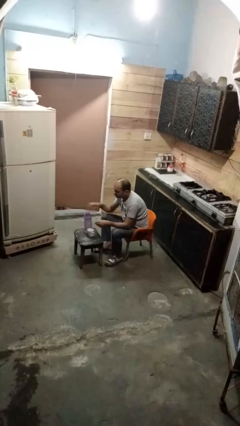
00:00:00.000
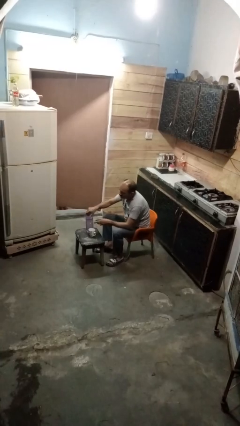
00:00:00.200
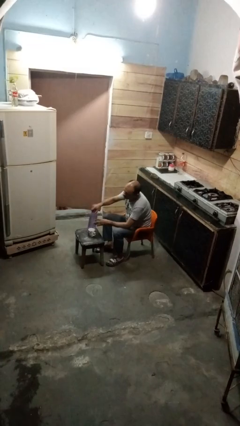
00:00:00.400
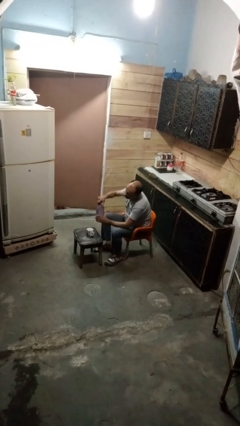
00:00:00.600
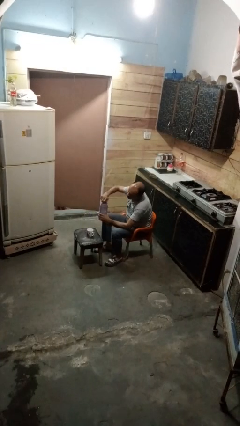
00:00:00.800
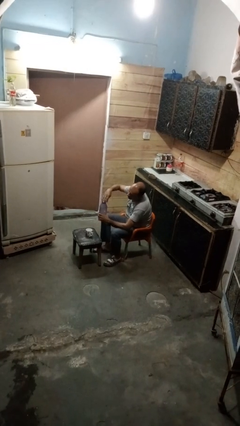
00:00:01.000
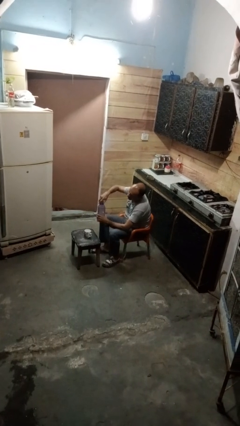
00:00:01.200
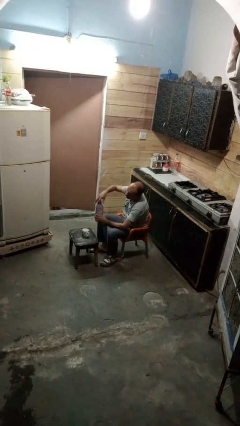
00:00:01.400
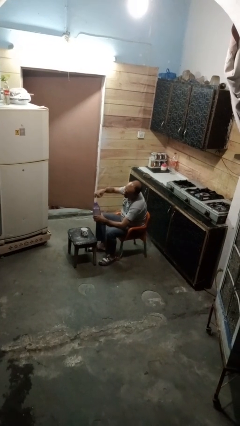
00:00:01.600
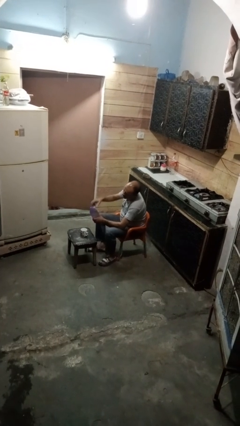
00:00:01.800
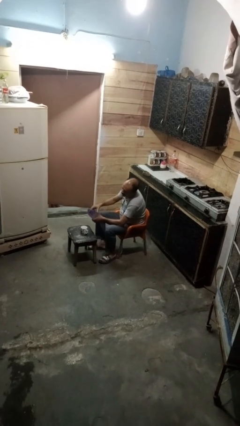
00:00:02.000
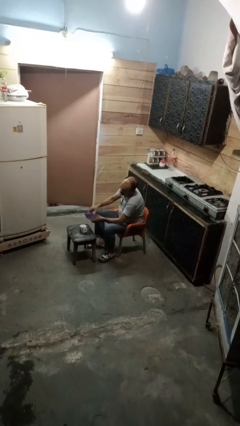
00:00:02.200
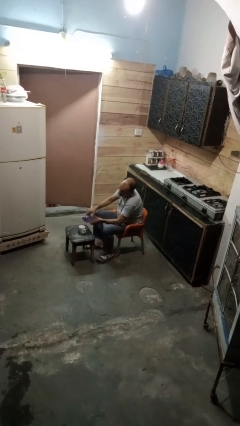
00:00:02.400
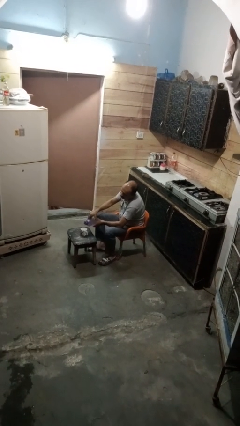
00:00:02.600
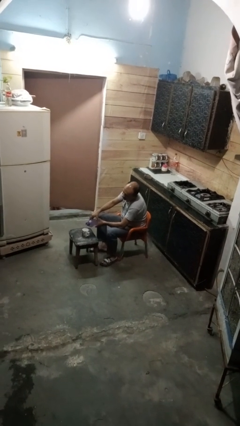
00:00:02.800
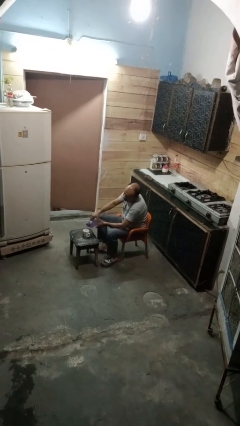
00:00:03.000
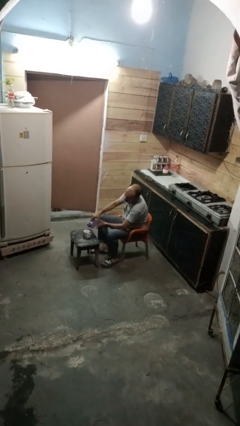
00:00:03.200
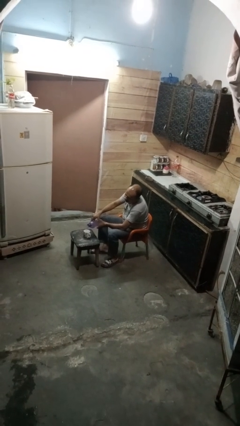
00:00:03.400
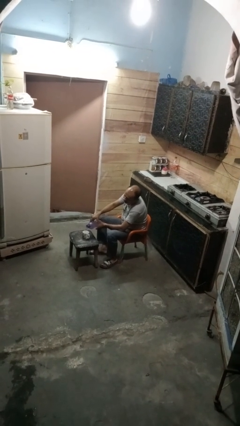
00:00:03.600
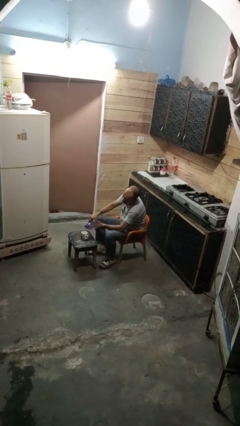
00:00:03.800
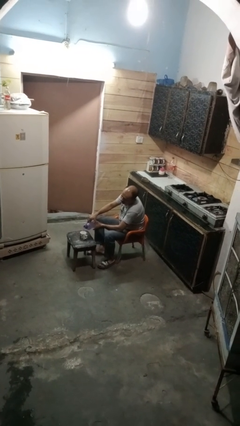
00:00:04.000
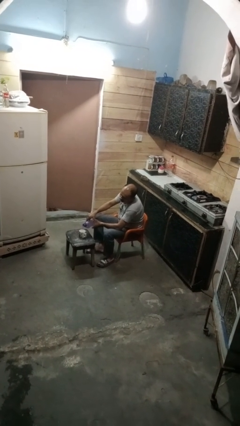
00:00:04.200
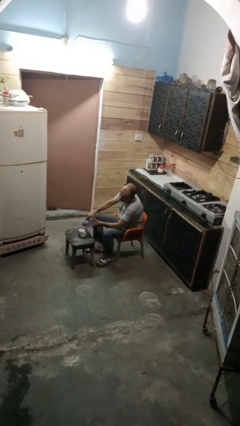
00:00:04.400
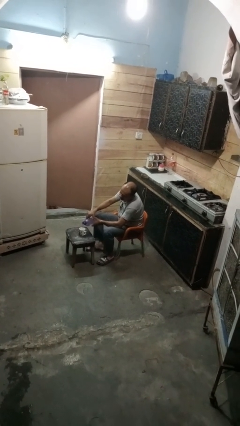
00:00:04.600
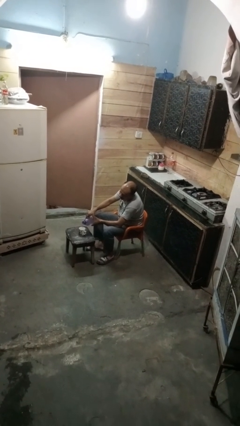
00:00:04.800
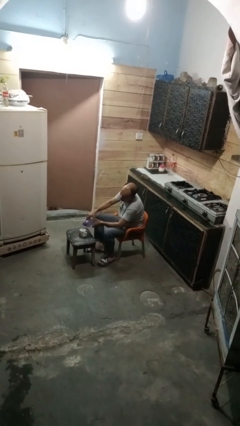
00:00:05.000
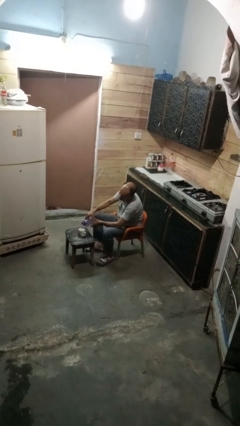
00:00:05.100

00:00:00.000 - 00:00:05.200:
person pours liquid into cup

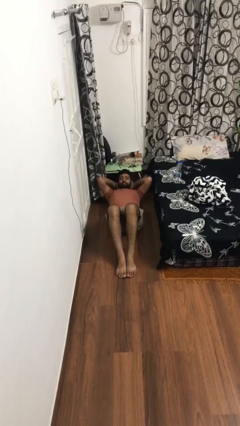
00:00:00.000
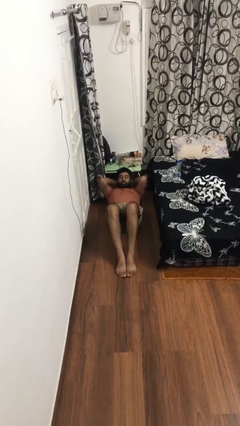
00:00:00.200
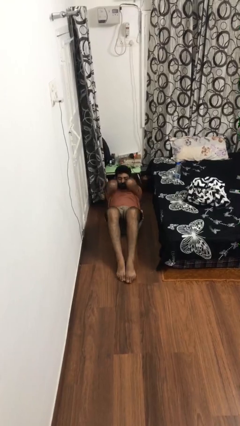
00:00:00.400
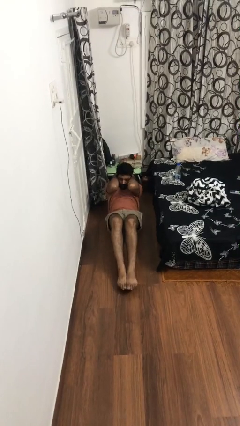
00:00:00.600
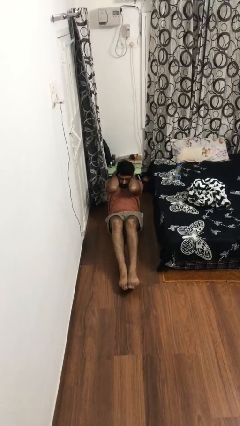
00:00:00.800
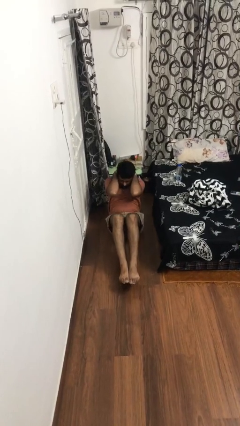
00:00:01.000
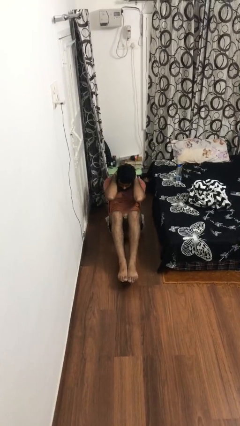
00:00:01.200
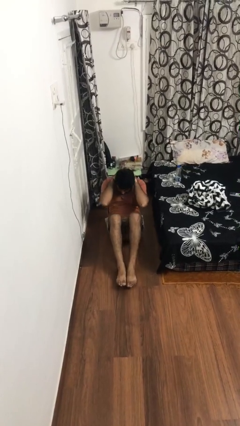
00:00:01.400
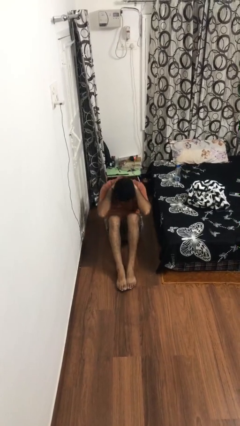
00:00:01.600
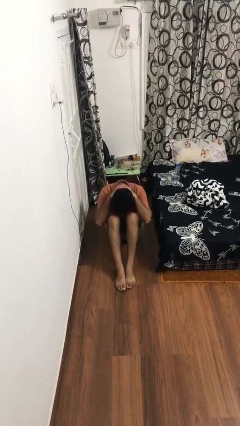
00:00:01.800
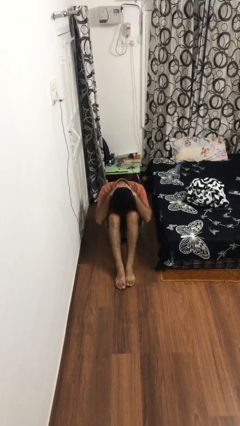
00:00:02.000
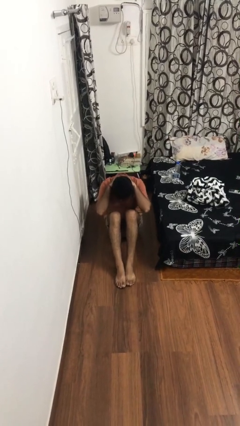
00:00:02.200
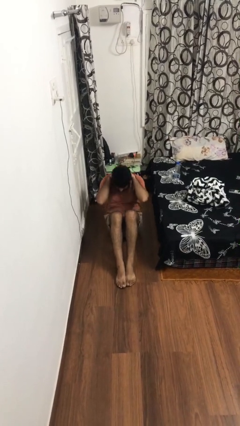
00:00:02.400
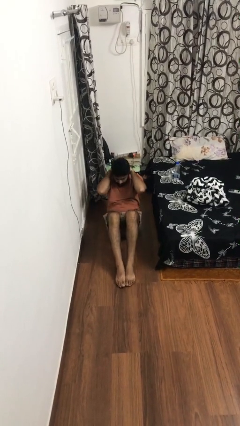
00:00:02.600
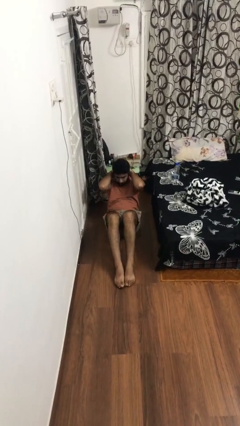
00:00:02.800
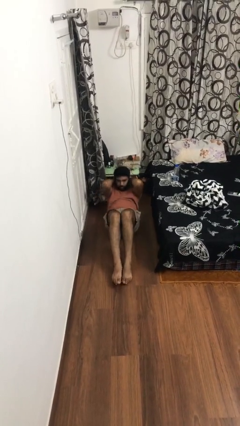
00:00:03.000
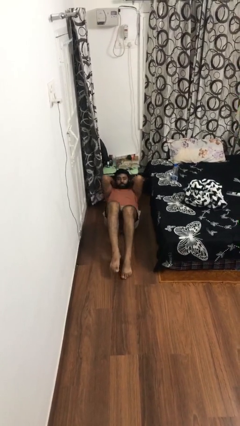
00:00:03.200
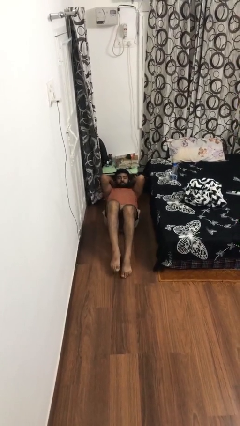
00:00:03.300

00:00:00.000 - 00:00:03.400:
person exercises with situp

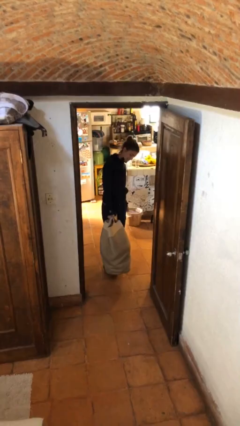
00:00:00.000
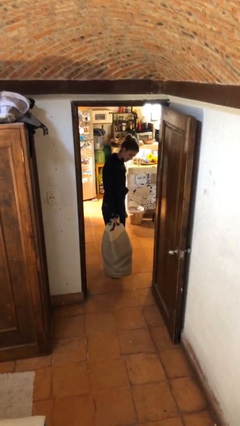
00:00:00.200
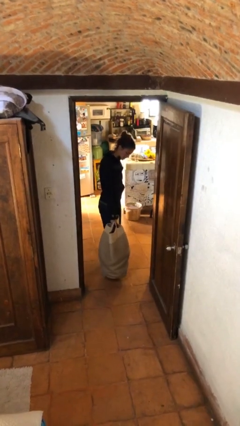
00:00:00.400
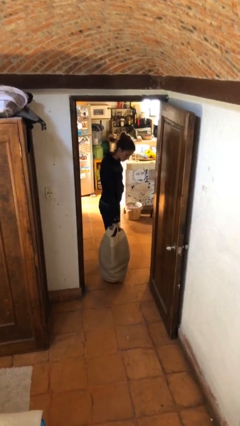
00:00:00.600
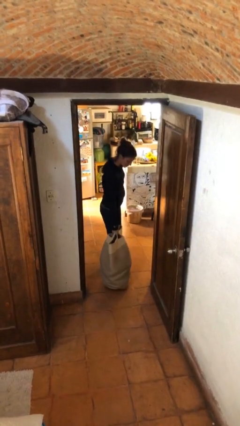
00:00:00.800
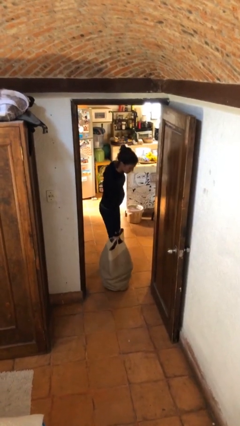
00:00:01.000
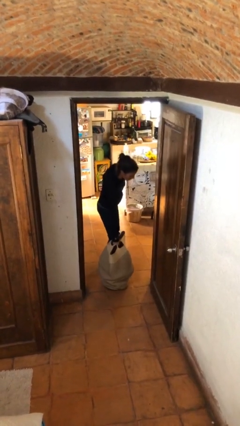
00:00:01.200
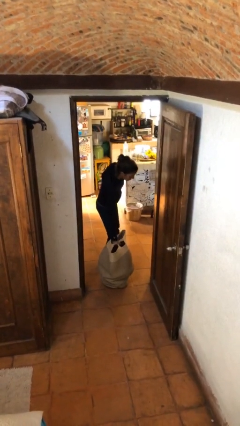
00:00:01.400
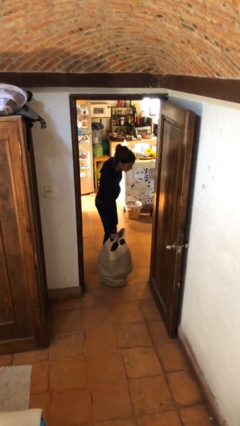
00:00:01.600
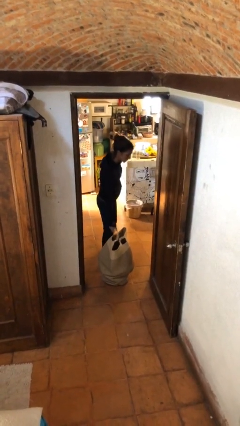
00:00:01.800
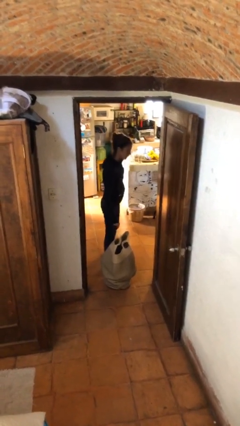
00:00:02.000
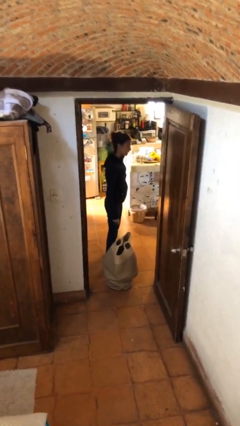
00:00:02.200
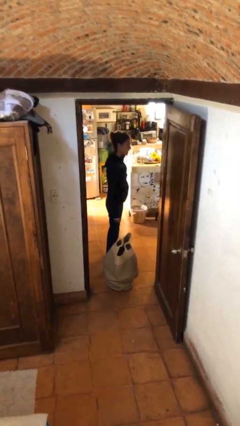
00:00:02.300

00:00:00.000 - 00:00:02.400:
person puts down object on floor

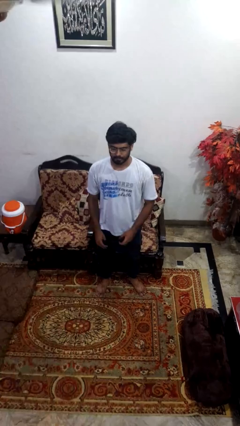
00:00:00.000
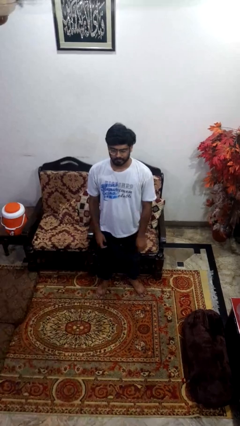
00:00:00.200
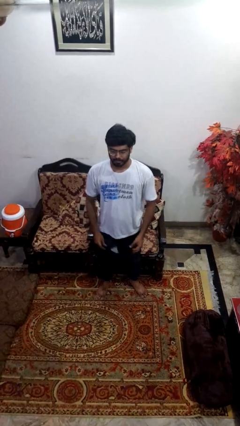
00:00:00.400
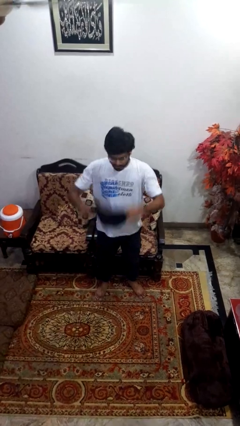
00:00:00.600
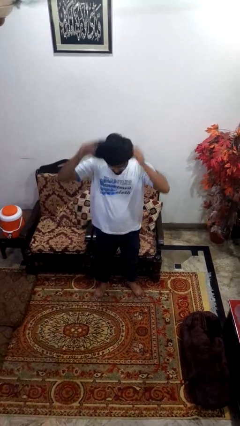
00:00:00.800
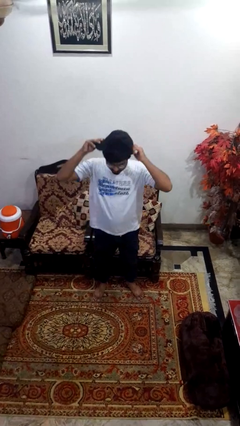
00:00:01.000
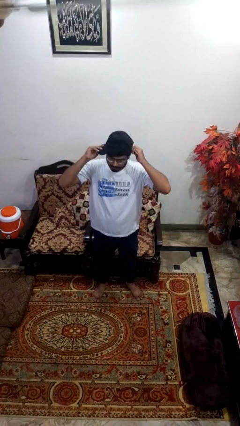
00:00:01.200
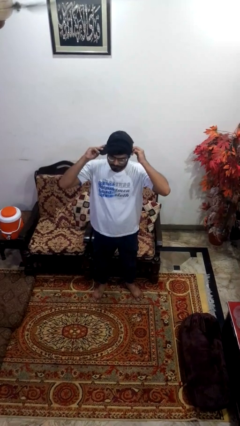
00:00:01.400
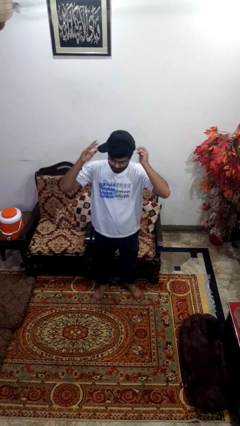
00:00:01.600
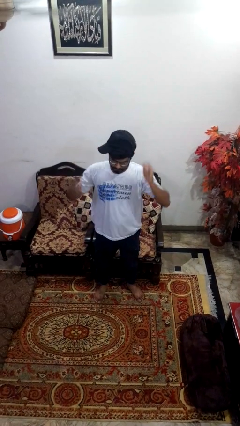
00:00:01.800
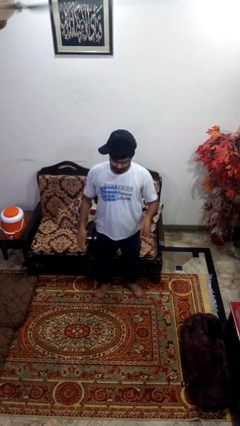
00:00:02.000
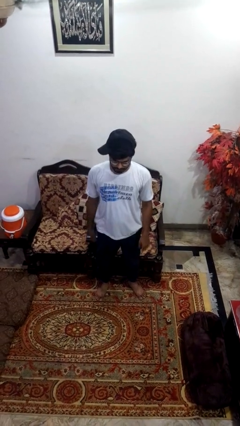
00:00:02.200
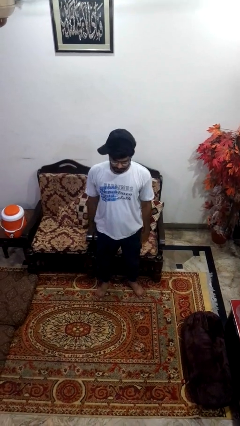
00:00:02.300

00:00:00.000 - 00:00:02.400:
person puts on hat

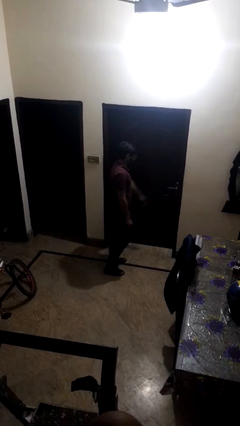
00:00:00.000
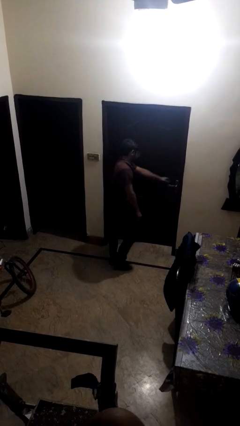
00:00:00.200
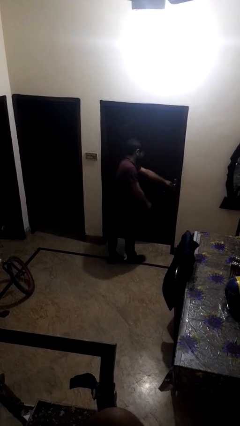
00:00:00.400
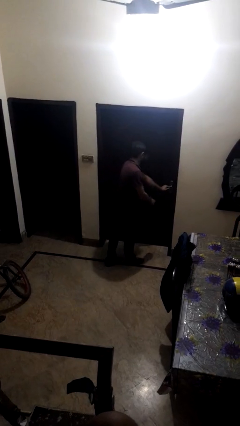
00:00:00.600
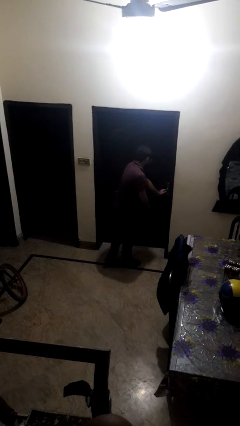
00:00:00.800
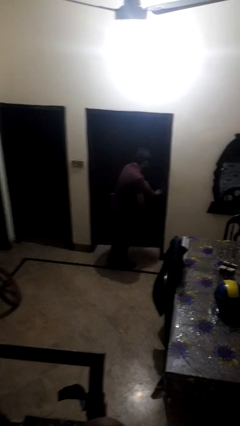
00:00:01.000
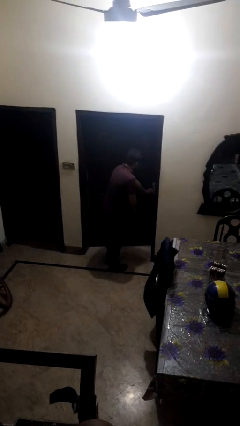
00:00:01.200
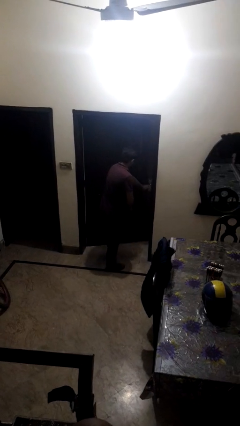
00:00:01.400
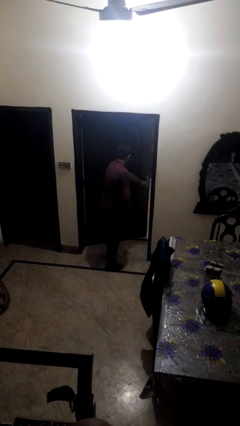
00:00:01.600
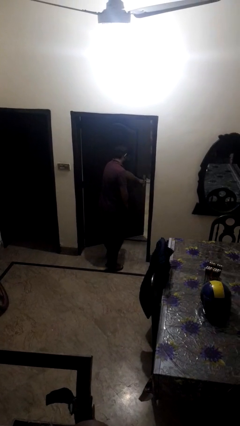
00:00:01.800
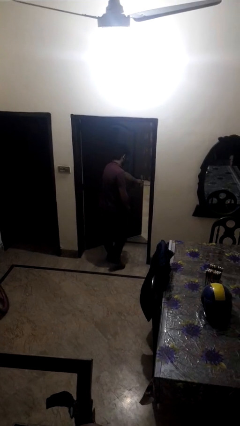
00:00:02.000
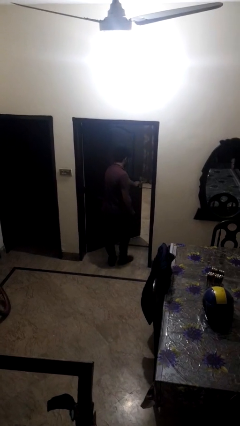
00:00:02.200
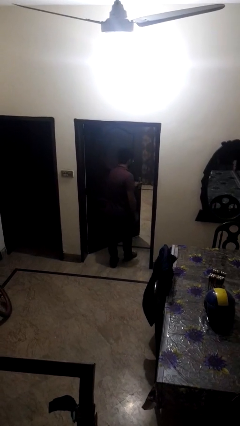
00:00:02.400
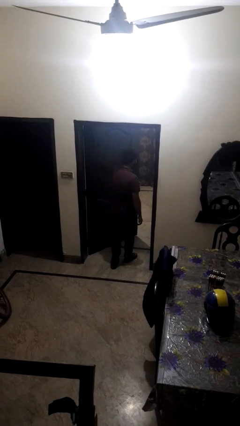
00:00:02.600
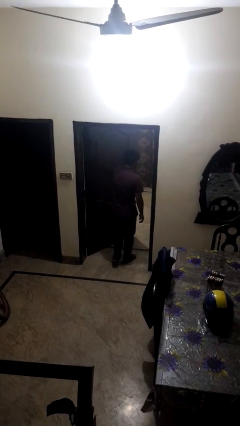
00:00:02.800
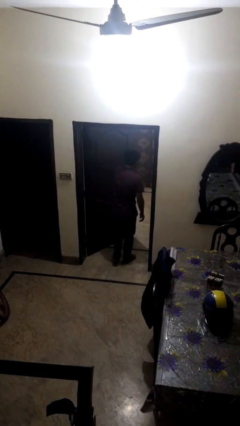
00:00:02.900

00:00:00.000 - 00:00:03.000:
person opens facility door

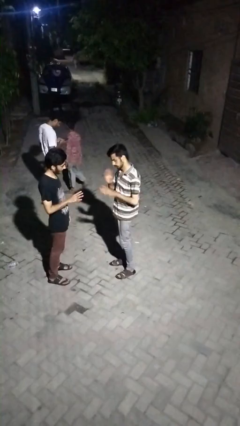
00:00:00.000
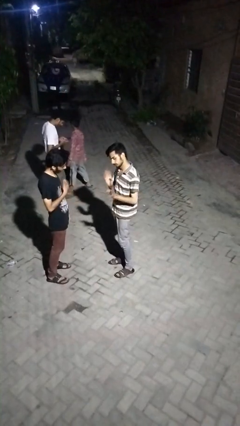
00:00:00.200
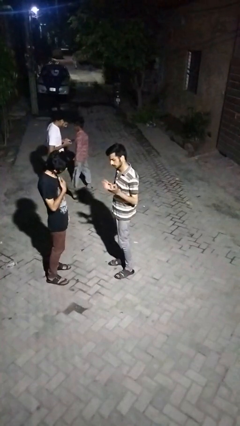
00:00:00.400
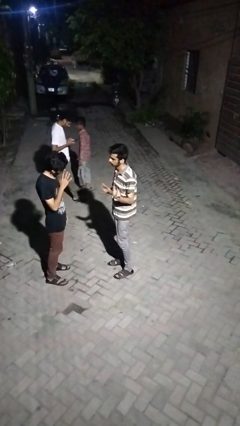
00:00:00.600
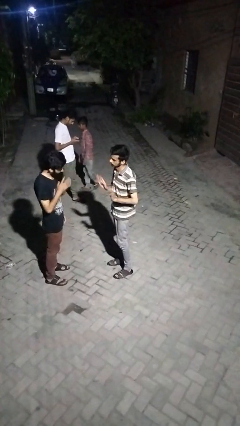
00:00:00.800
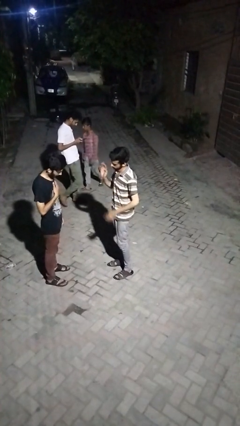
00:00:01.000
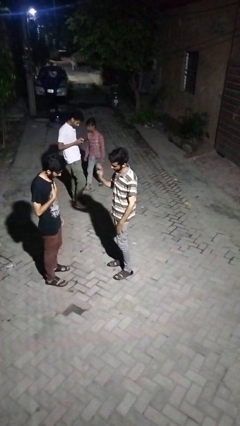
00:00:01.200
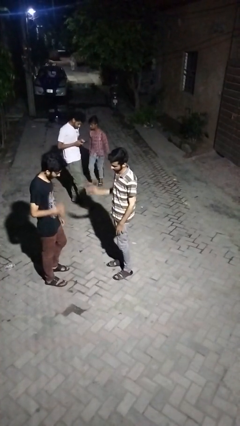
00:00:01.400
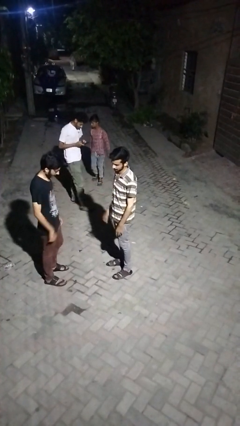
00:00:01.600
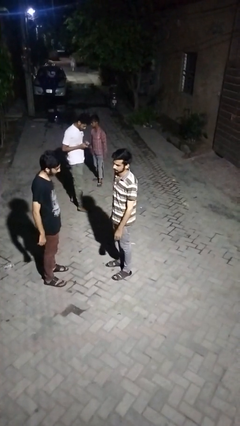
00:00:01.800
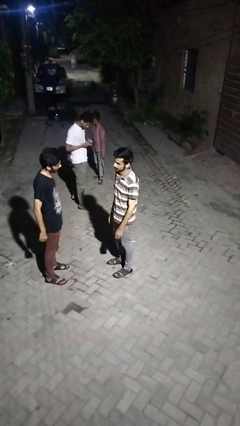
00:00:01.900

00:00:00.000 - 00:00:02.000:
person talks to person
